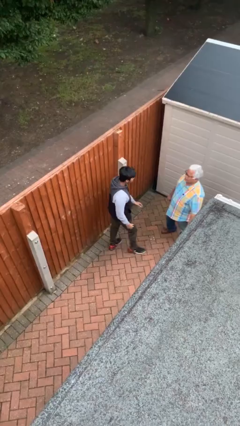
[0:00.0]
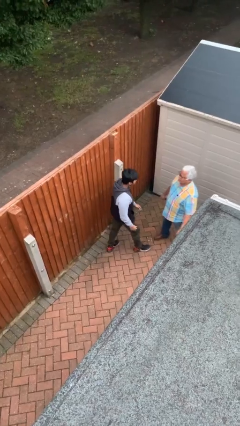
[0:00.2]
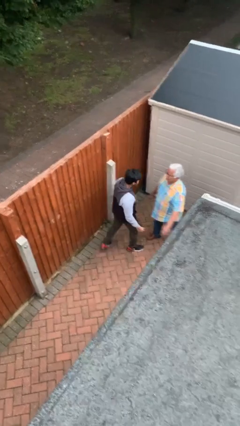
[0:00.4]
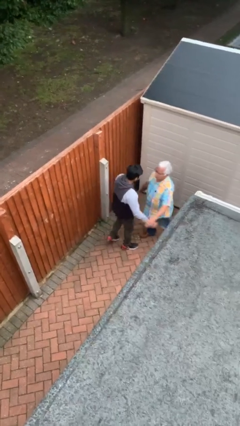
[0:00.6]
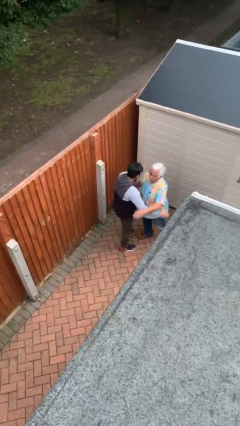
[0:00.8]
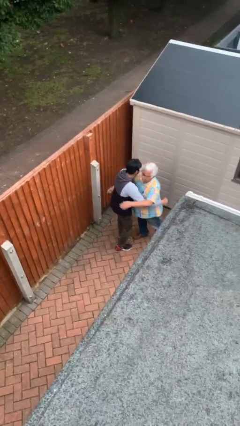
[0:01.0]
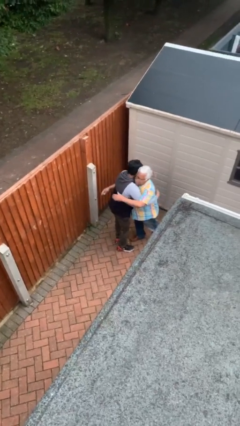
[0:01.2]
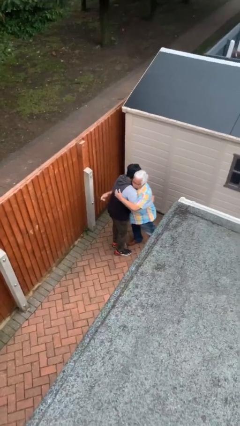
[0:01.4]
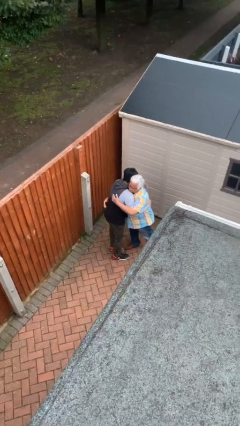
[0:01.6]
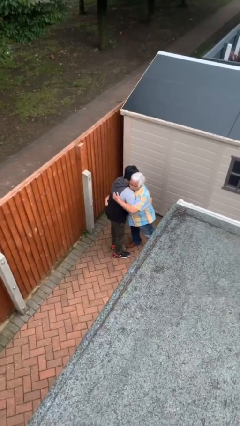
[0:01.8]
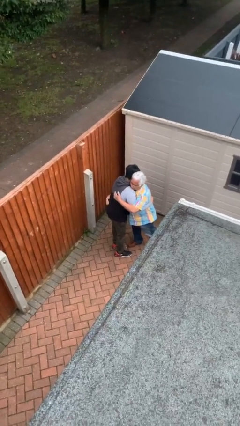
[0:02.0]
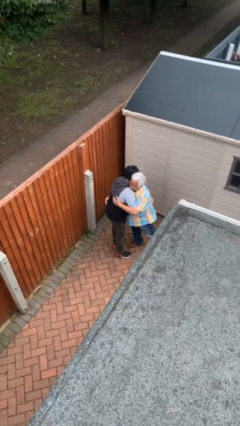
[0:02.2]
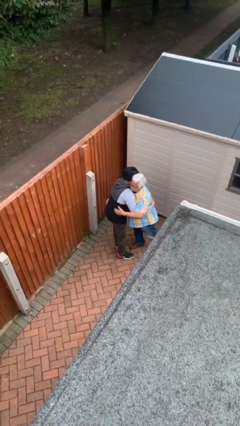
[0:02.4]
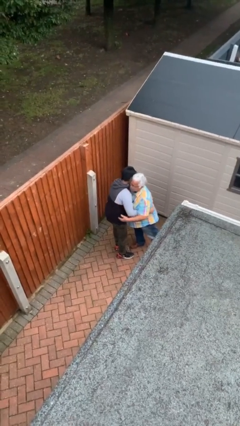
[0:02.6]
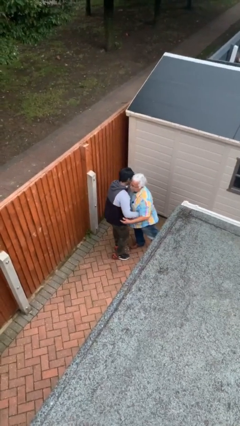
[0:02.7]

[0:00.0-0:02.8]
person embraces person

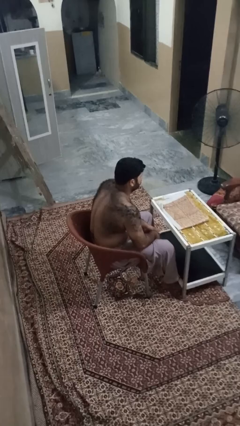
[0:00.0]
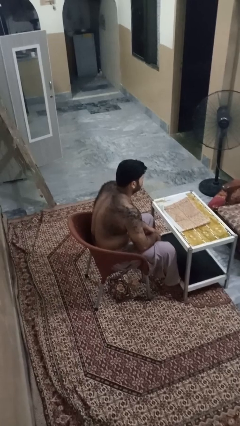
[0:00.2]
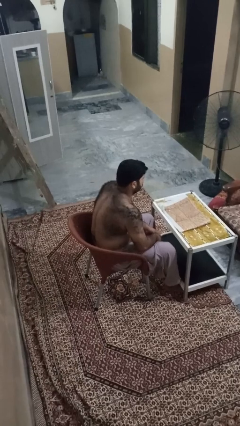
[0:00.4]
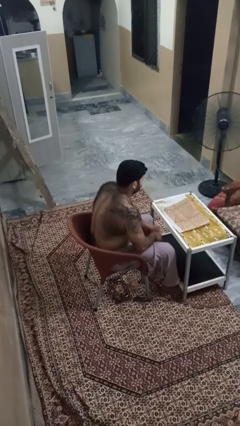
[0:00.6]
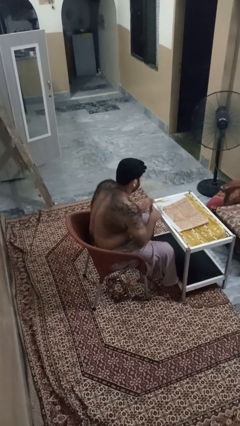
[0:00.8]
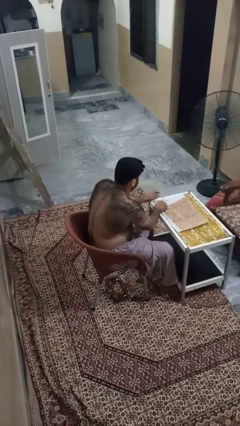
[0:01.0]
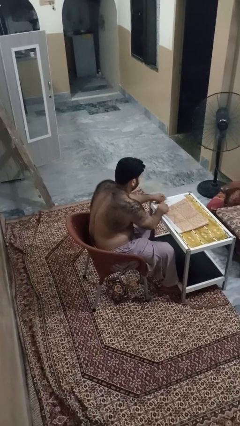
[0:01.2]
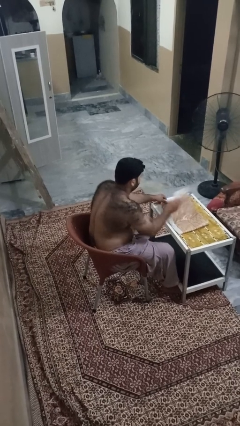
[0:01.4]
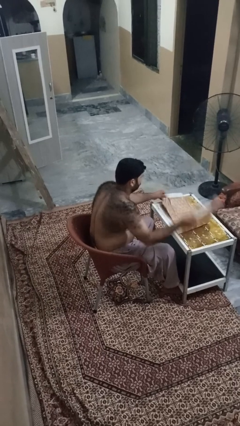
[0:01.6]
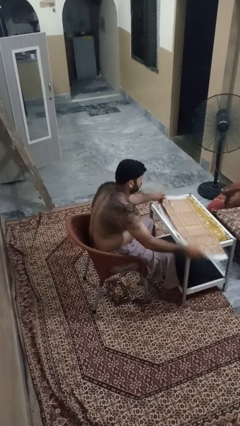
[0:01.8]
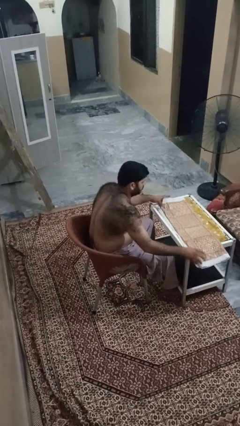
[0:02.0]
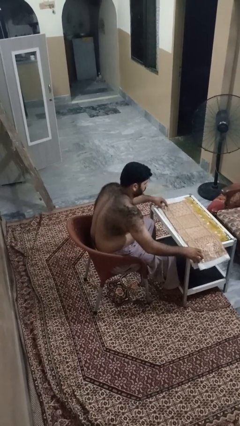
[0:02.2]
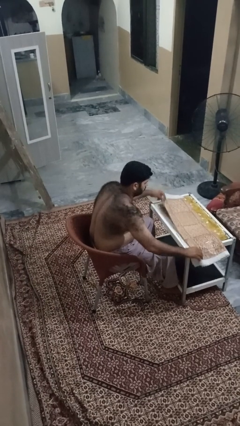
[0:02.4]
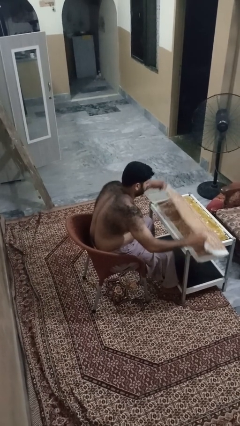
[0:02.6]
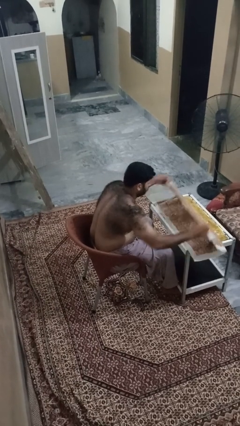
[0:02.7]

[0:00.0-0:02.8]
person spreads tablecloth

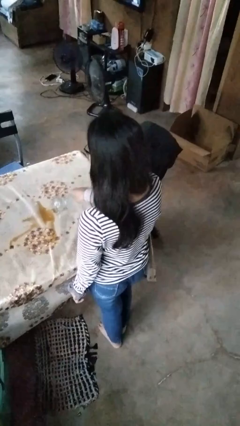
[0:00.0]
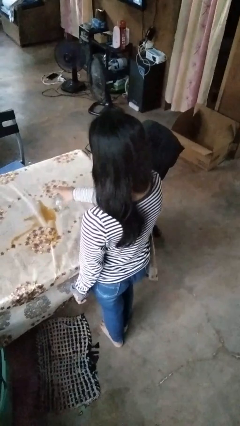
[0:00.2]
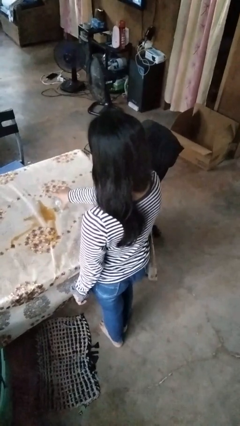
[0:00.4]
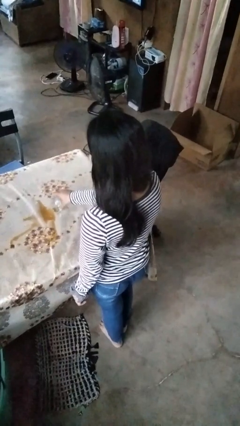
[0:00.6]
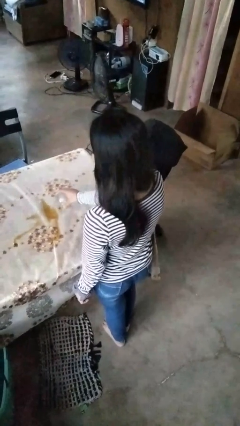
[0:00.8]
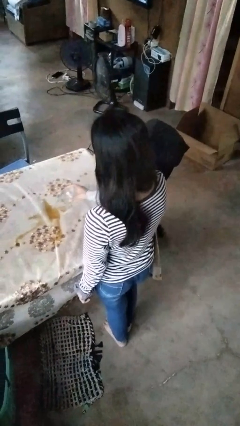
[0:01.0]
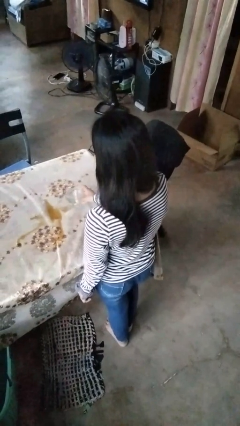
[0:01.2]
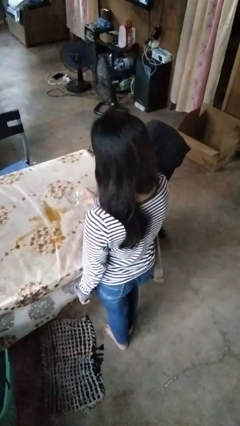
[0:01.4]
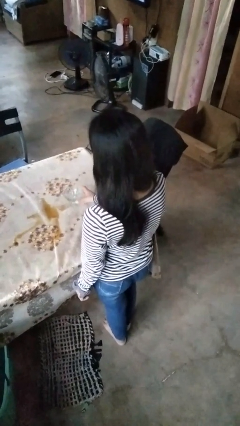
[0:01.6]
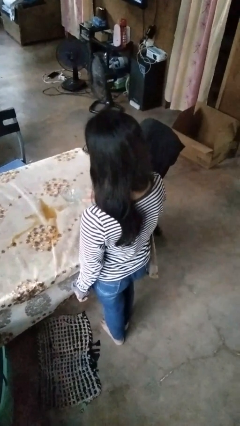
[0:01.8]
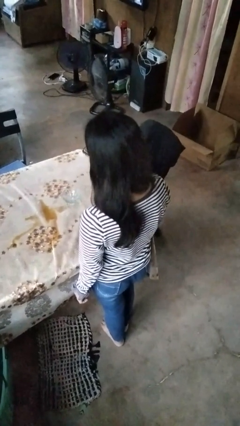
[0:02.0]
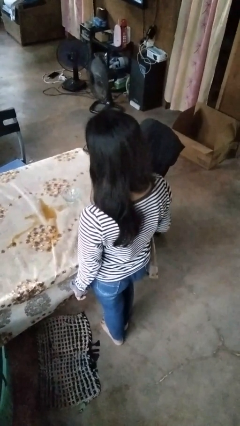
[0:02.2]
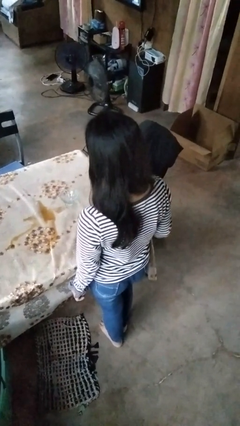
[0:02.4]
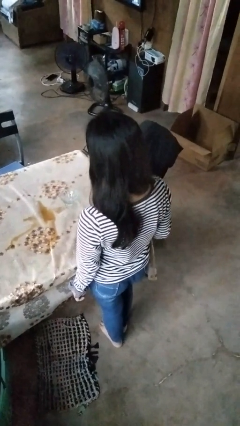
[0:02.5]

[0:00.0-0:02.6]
person sets upright glass

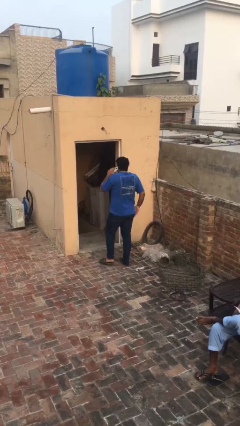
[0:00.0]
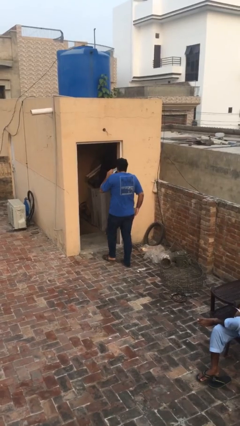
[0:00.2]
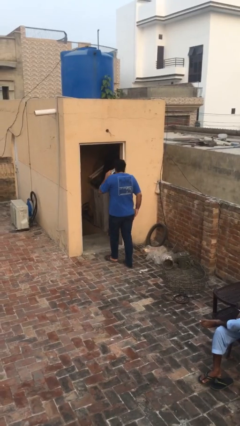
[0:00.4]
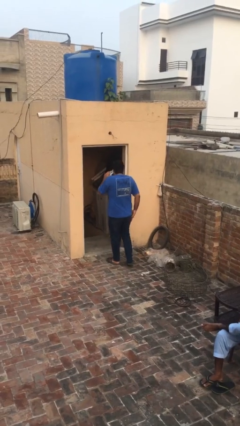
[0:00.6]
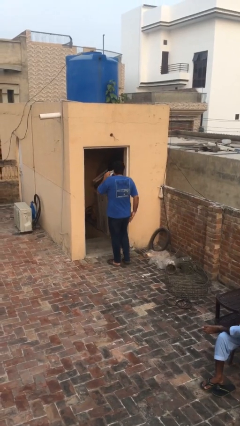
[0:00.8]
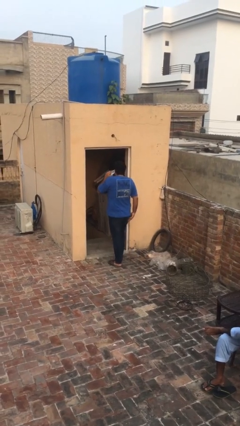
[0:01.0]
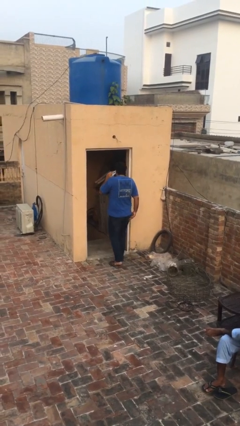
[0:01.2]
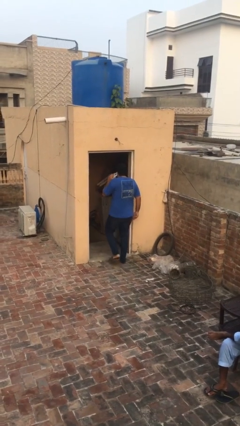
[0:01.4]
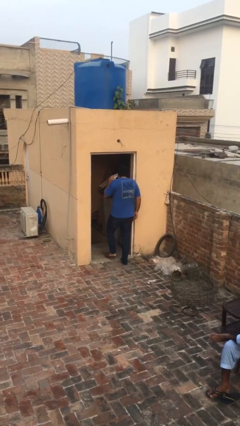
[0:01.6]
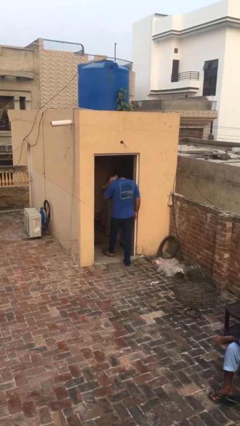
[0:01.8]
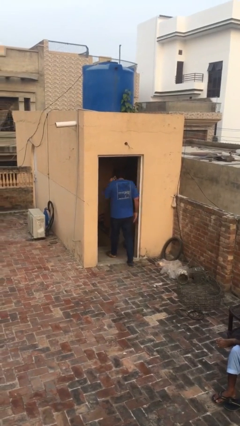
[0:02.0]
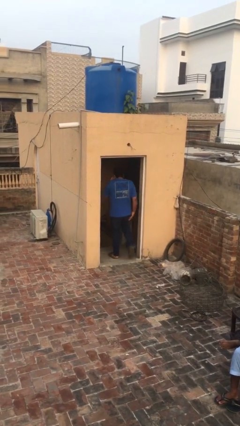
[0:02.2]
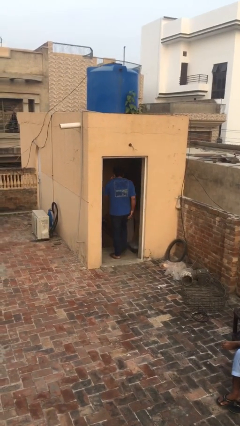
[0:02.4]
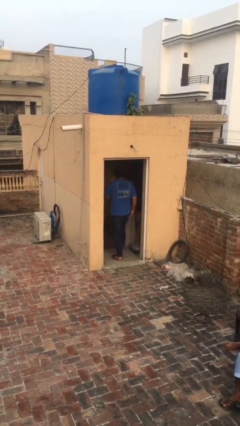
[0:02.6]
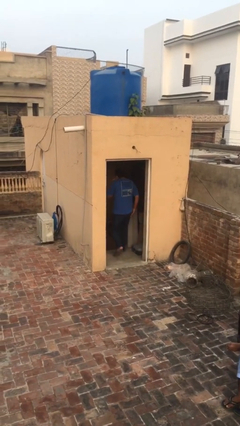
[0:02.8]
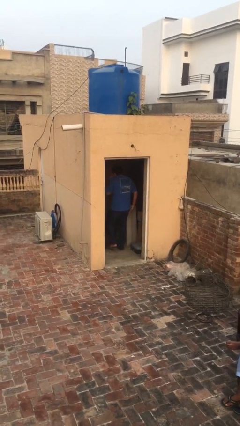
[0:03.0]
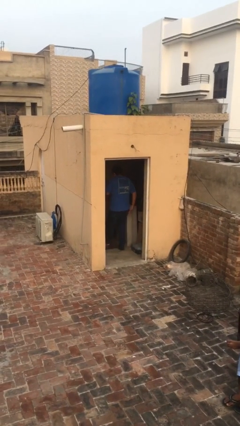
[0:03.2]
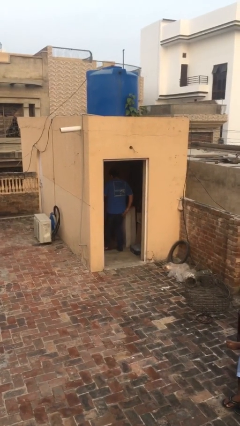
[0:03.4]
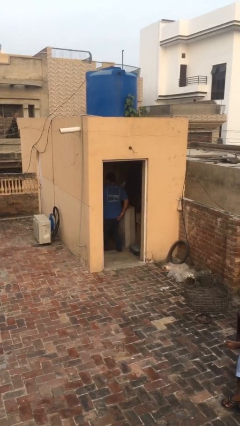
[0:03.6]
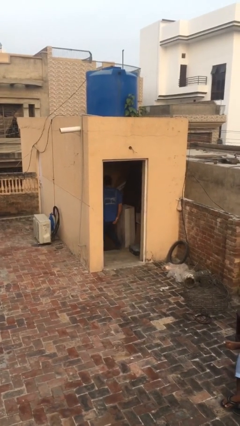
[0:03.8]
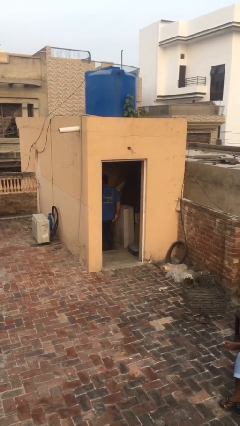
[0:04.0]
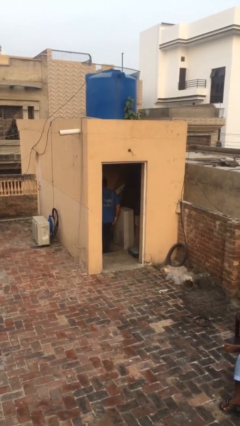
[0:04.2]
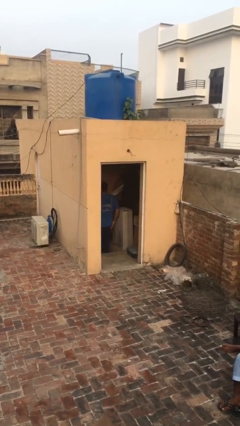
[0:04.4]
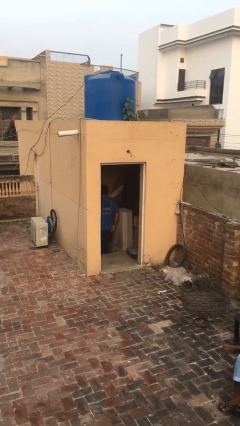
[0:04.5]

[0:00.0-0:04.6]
person exits scene through structure

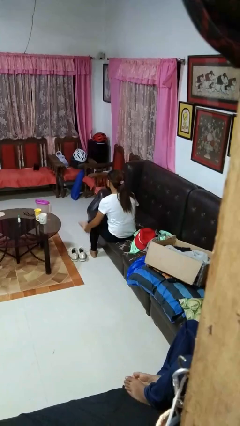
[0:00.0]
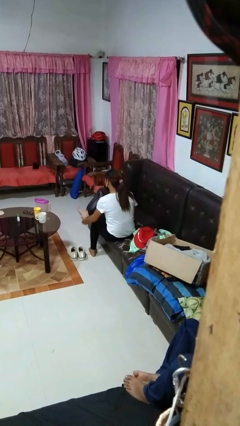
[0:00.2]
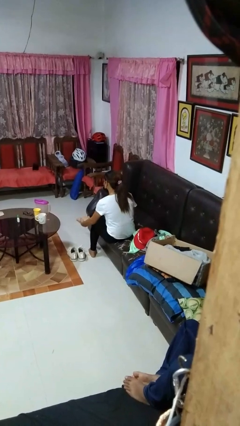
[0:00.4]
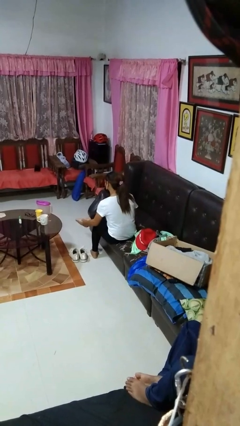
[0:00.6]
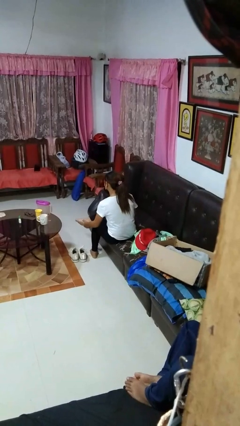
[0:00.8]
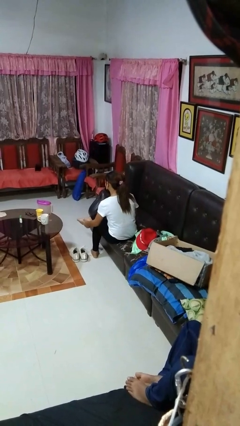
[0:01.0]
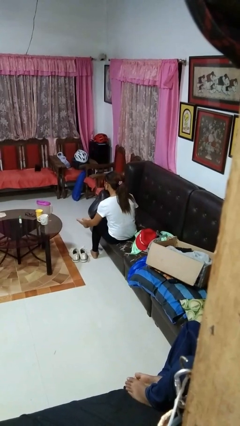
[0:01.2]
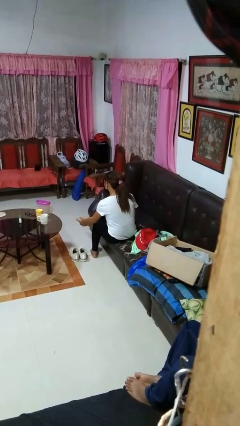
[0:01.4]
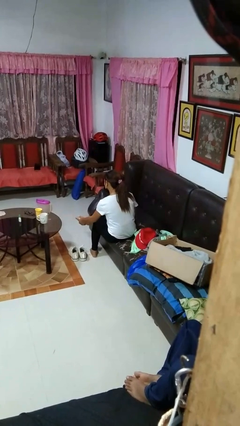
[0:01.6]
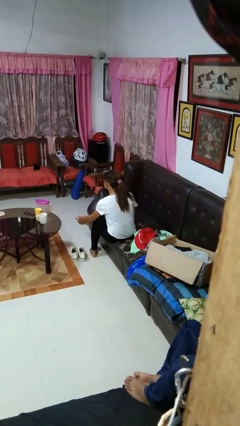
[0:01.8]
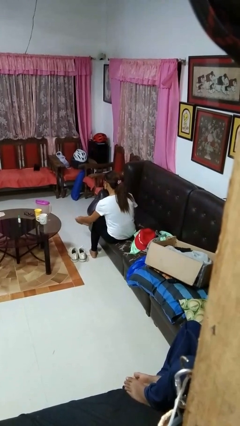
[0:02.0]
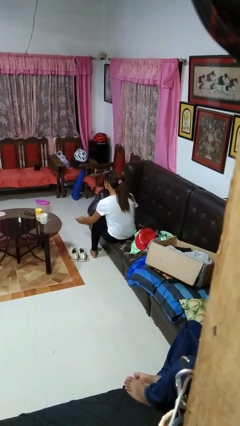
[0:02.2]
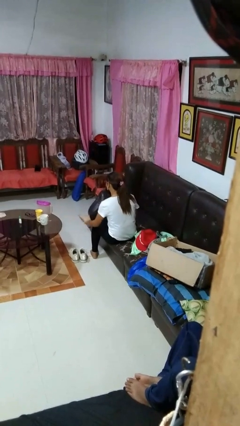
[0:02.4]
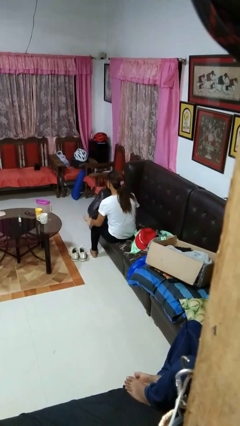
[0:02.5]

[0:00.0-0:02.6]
person rubs foot

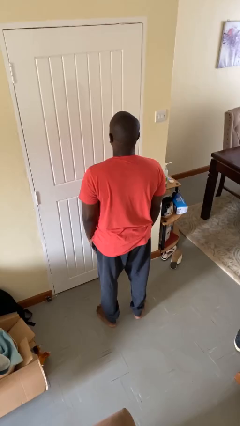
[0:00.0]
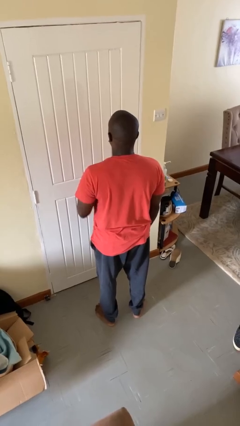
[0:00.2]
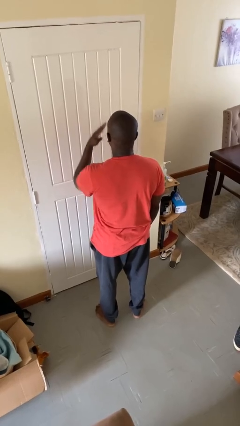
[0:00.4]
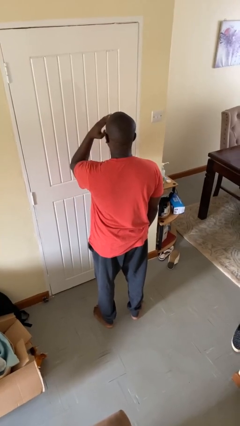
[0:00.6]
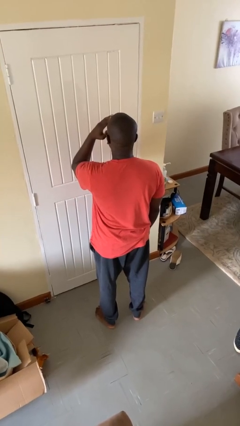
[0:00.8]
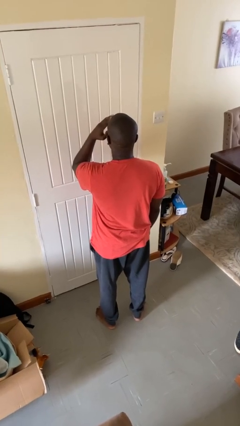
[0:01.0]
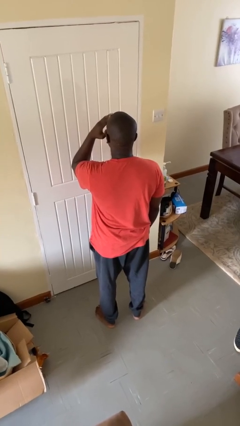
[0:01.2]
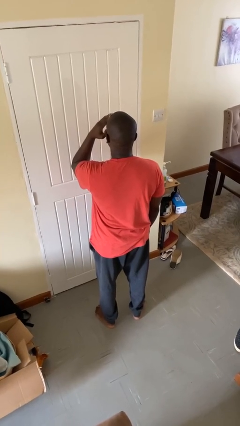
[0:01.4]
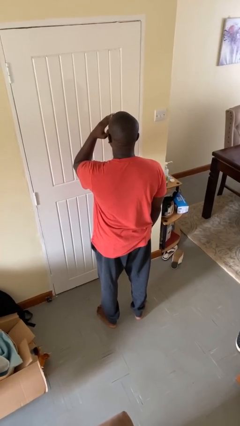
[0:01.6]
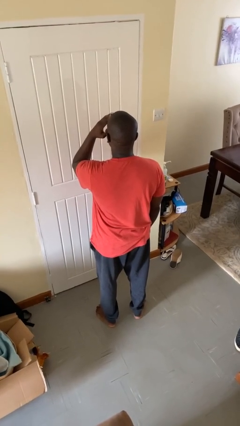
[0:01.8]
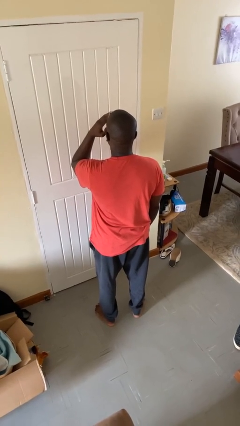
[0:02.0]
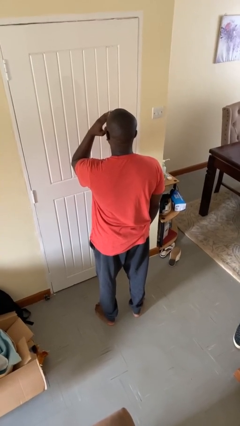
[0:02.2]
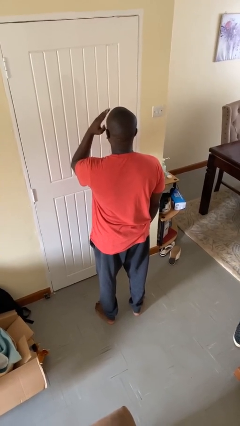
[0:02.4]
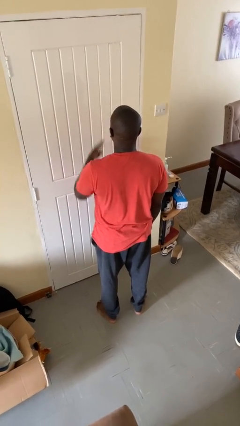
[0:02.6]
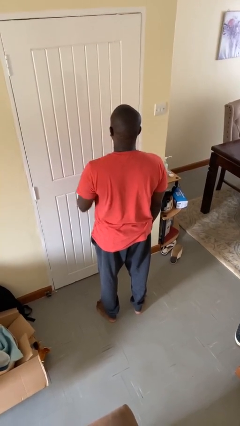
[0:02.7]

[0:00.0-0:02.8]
person salutes
